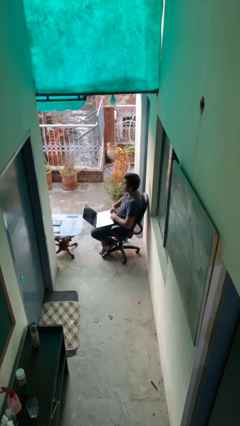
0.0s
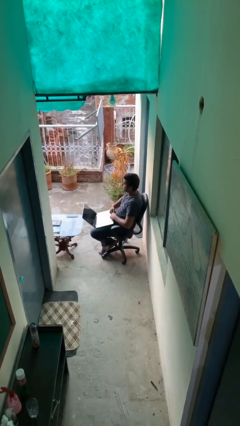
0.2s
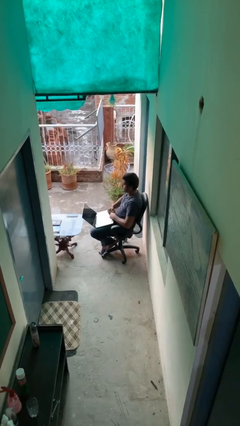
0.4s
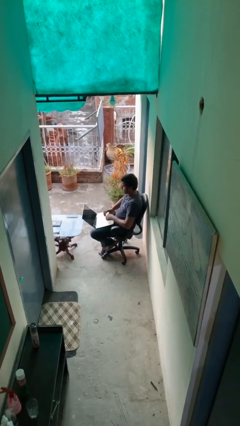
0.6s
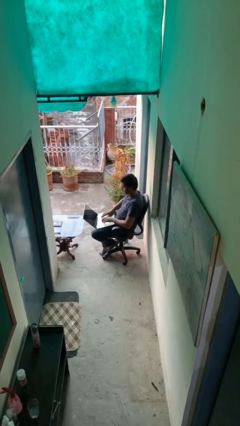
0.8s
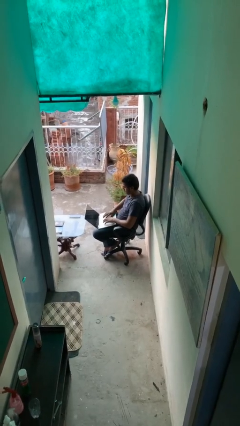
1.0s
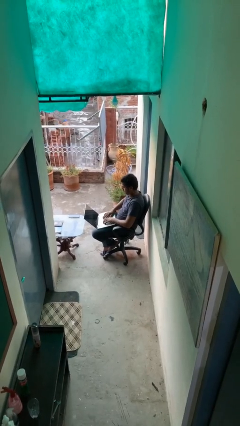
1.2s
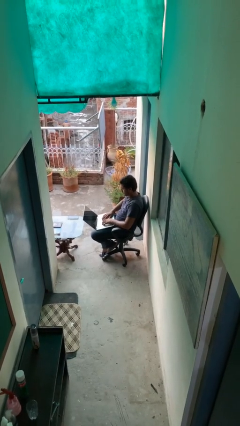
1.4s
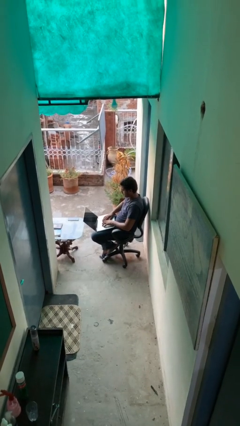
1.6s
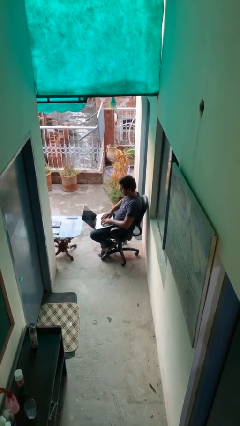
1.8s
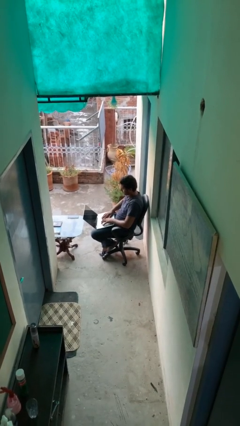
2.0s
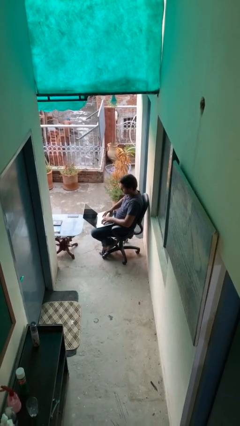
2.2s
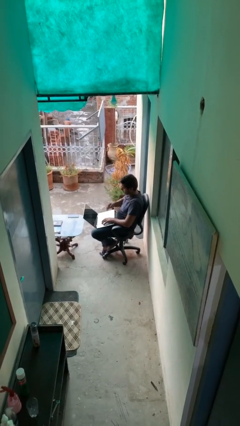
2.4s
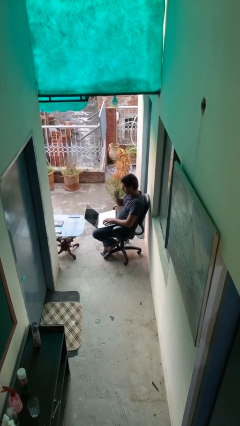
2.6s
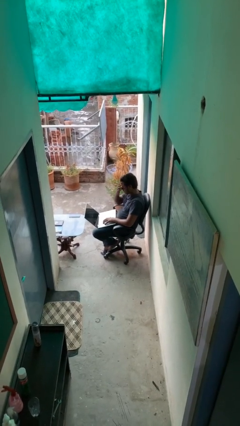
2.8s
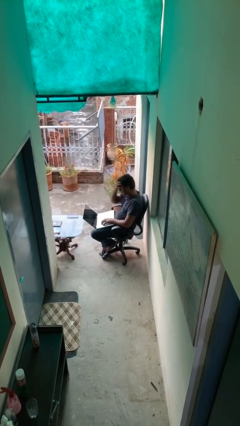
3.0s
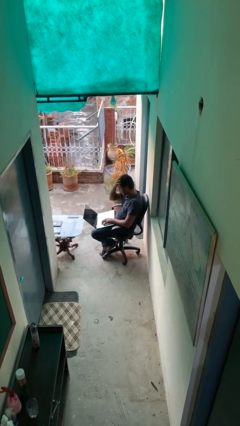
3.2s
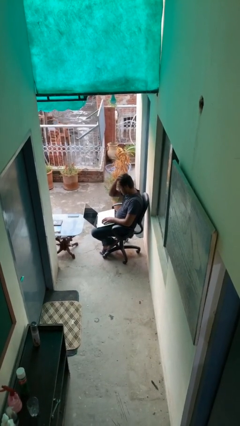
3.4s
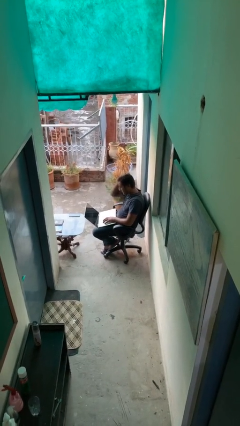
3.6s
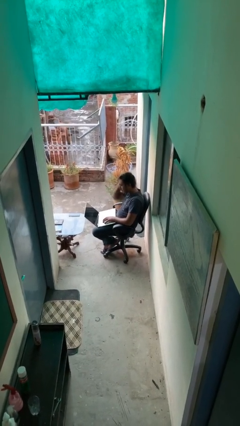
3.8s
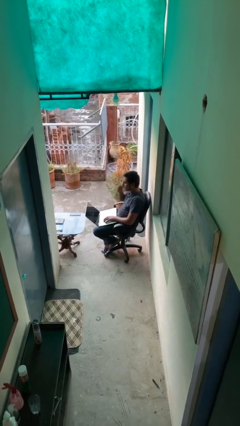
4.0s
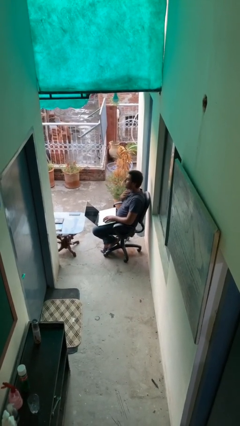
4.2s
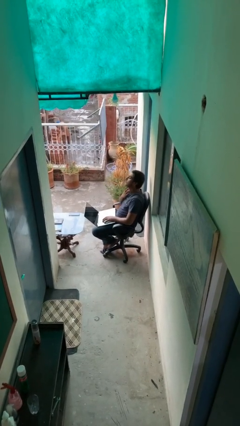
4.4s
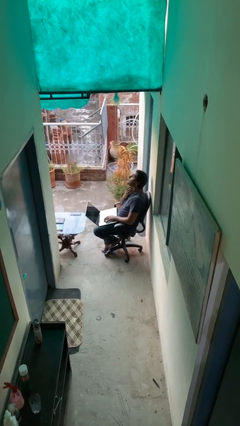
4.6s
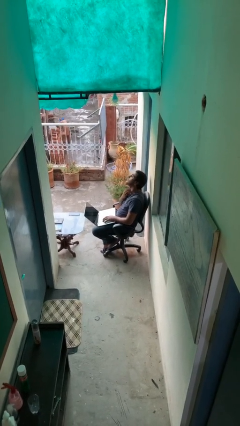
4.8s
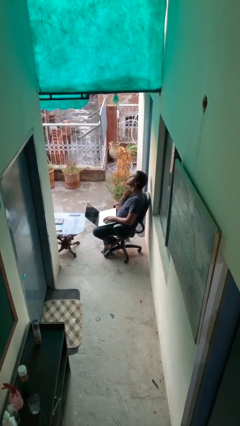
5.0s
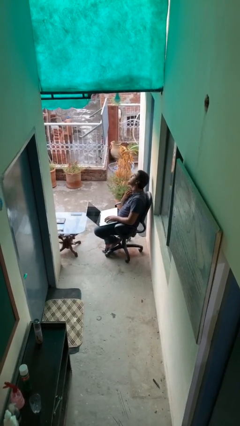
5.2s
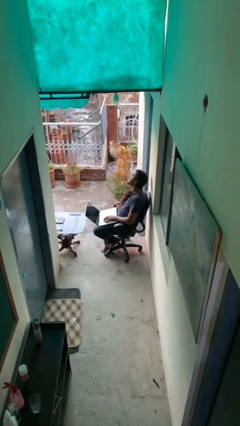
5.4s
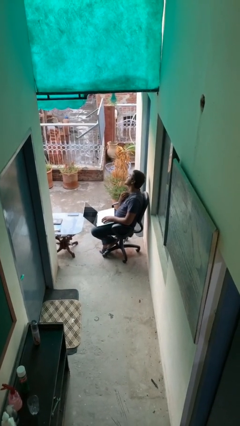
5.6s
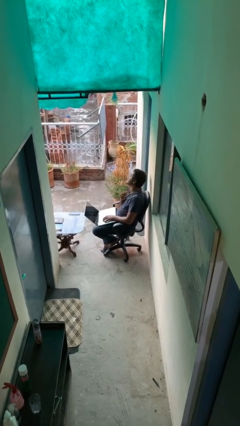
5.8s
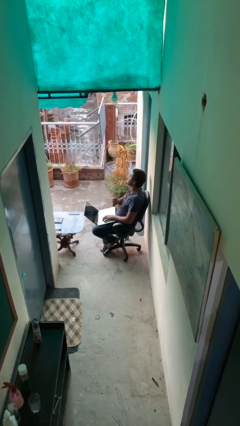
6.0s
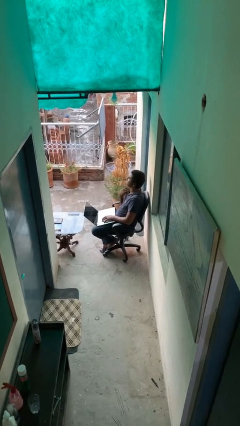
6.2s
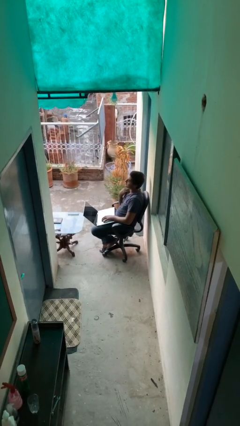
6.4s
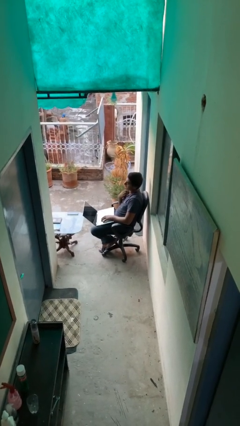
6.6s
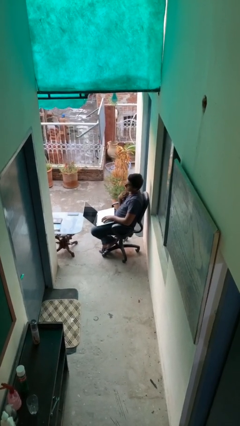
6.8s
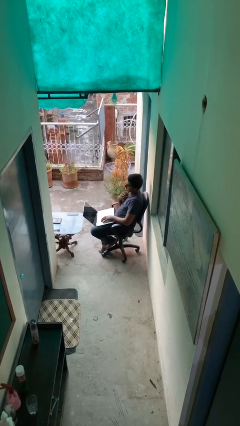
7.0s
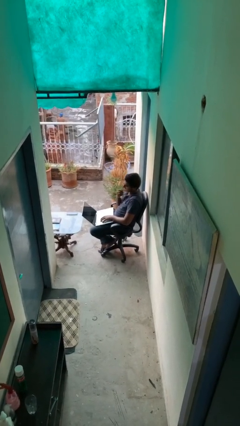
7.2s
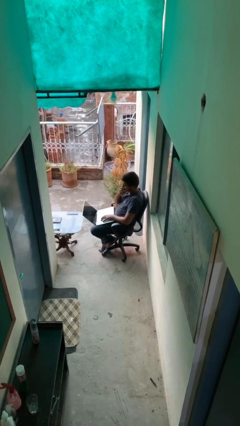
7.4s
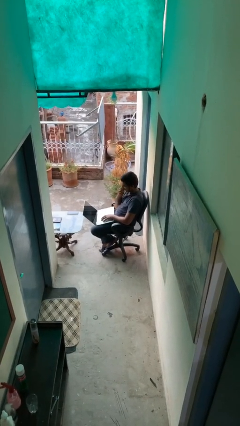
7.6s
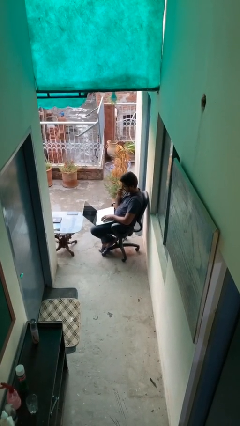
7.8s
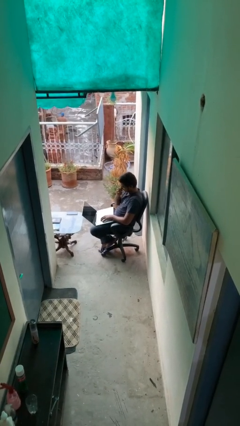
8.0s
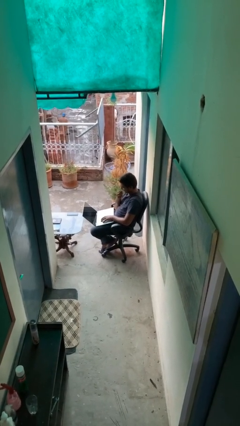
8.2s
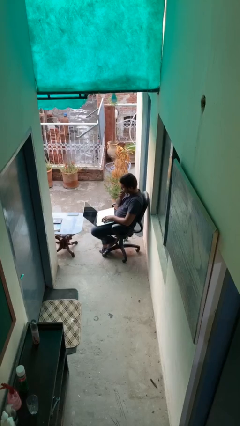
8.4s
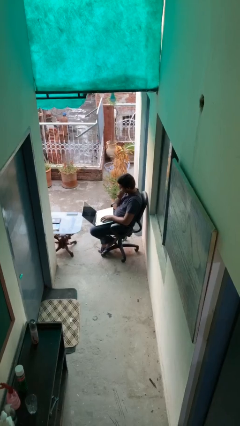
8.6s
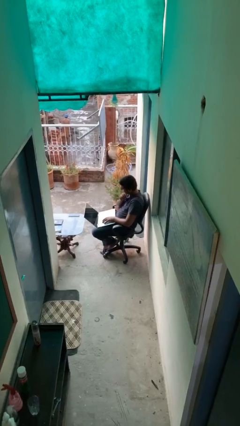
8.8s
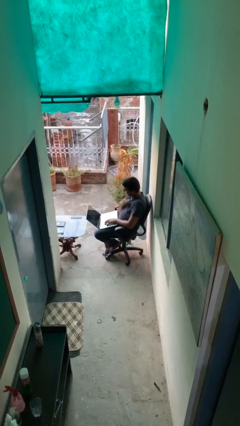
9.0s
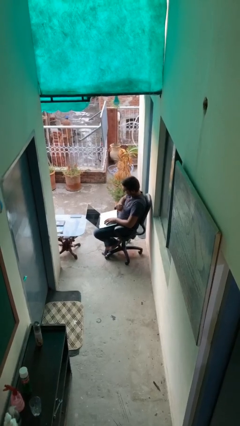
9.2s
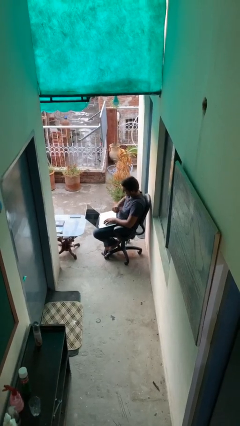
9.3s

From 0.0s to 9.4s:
person interacts with laptop

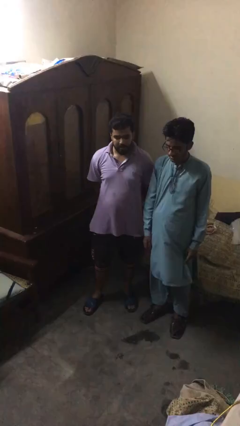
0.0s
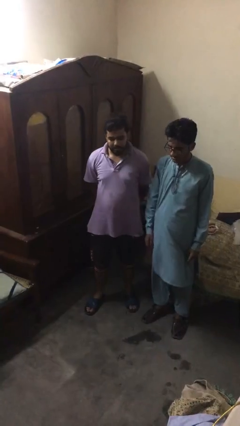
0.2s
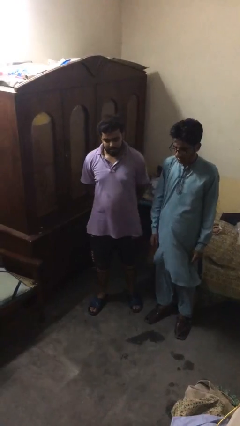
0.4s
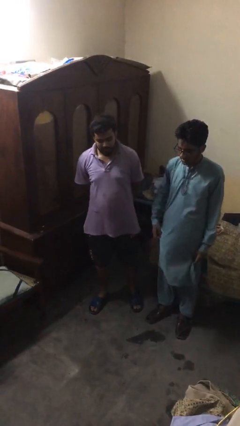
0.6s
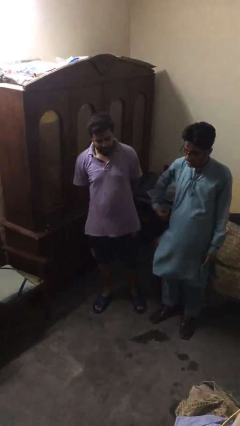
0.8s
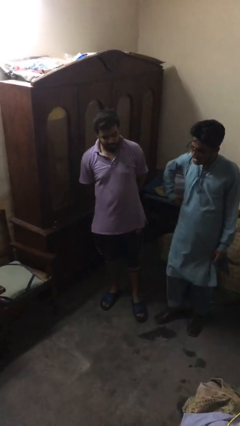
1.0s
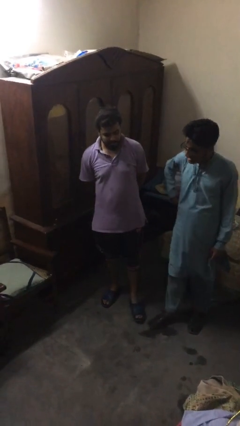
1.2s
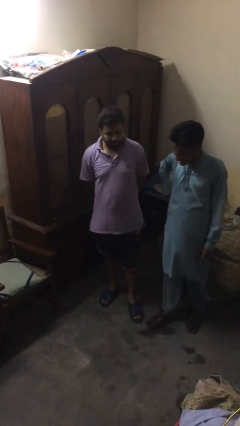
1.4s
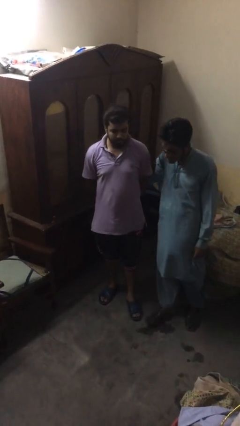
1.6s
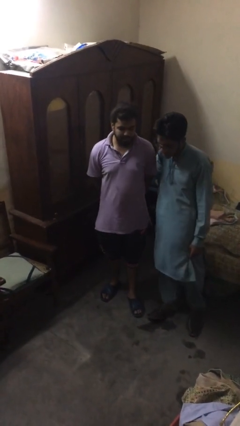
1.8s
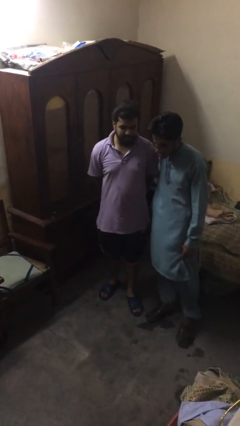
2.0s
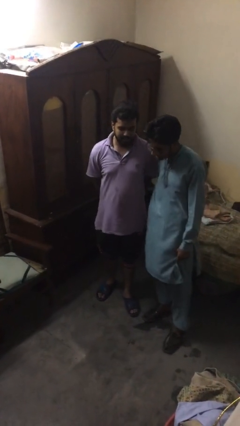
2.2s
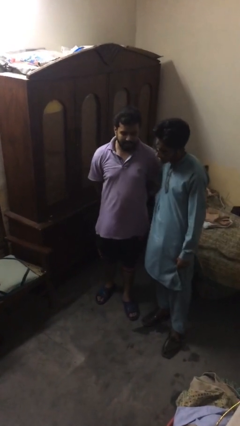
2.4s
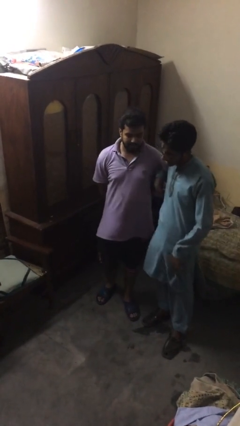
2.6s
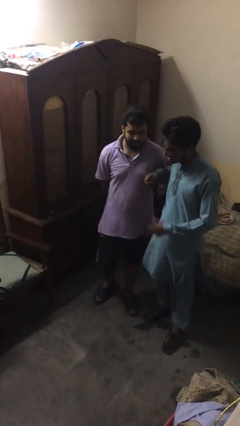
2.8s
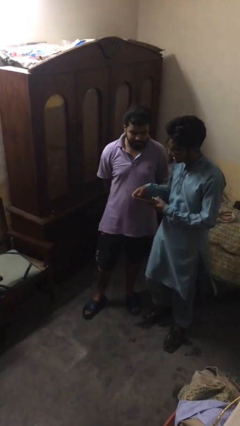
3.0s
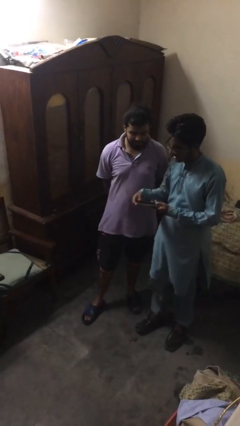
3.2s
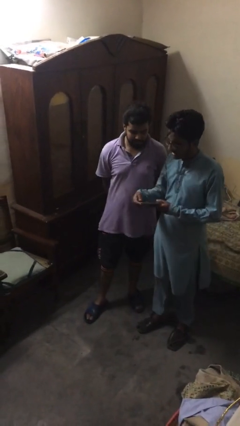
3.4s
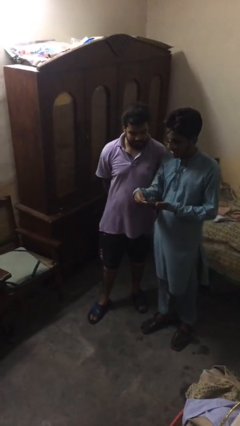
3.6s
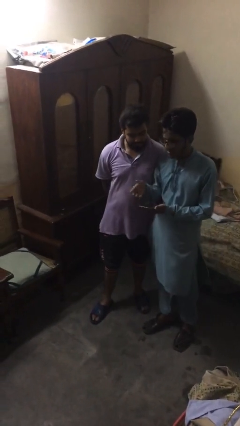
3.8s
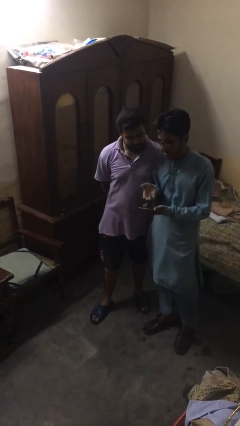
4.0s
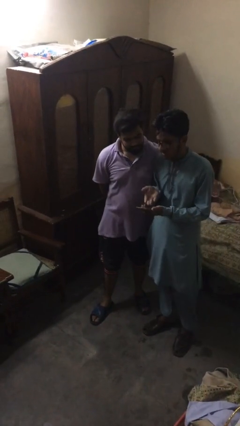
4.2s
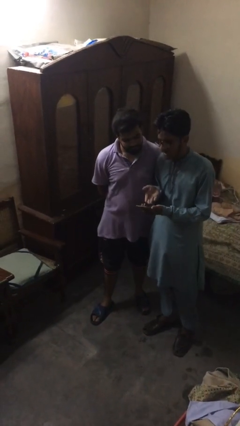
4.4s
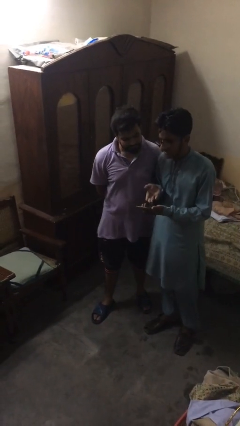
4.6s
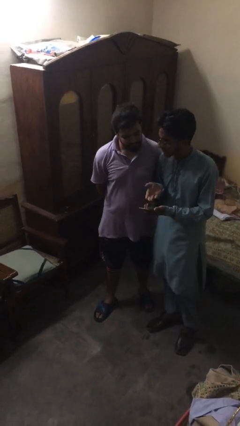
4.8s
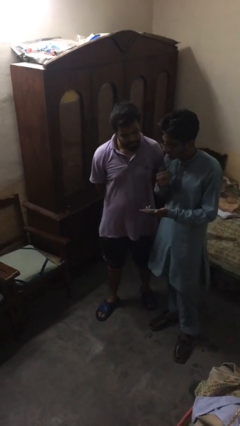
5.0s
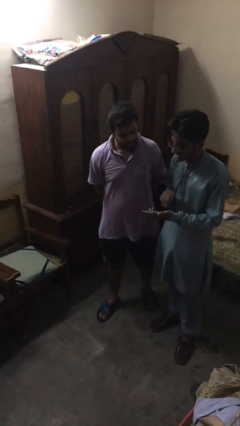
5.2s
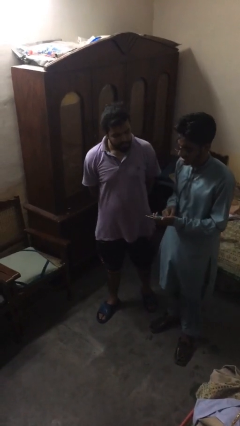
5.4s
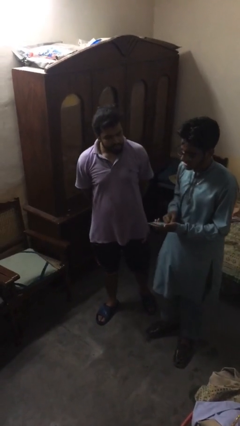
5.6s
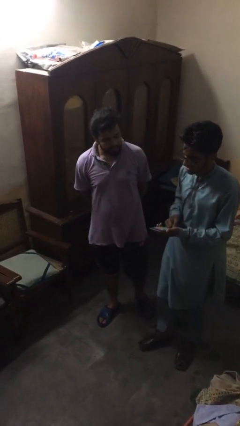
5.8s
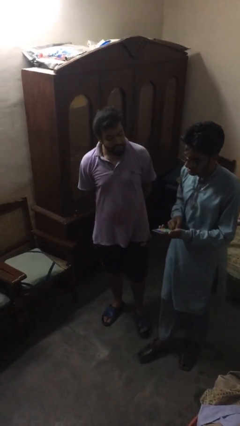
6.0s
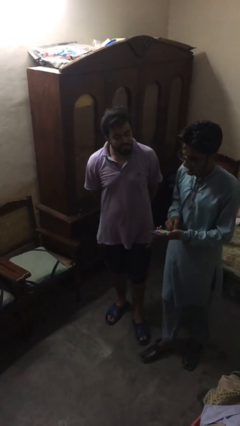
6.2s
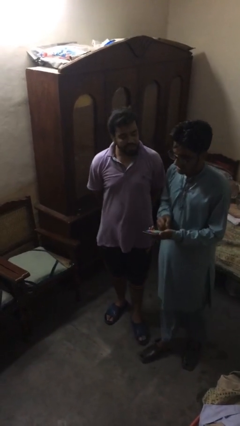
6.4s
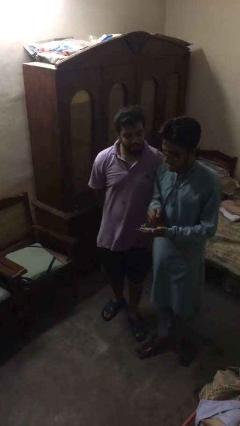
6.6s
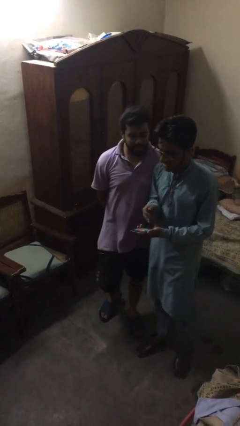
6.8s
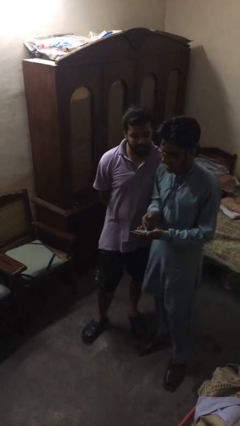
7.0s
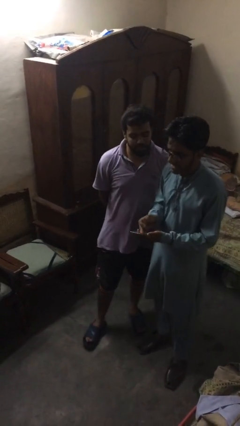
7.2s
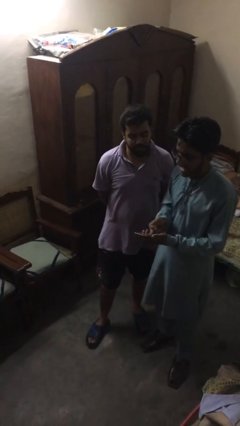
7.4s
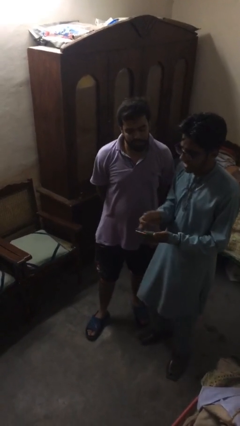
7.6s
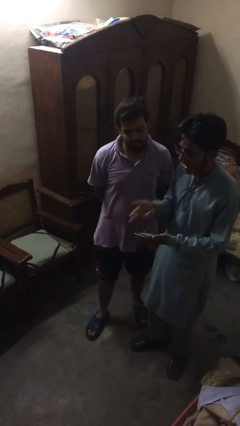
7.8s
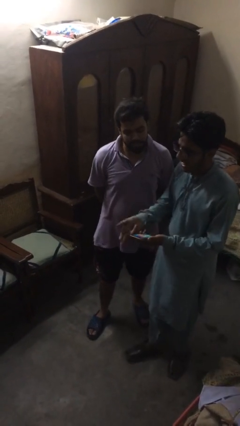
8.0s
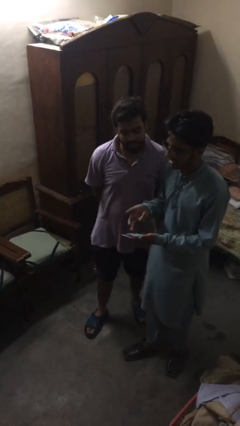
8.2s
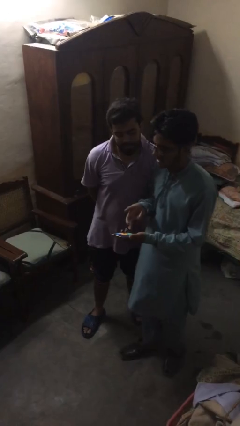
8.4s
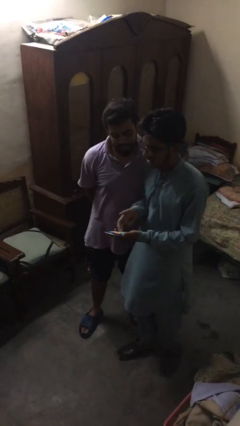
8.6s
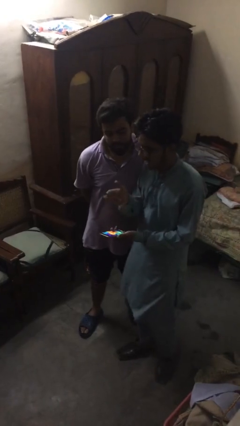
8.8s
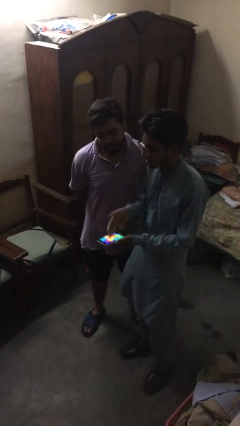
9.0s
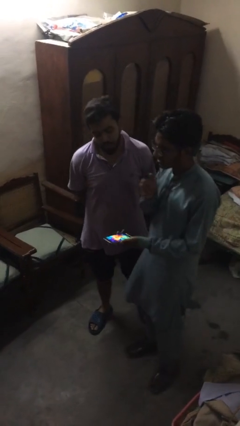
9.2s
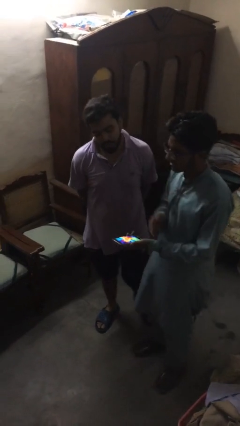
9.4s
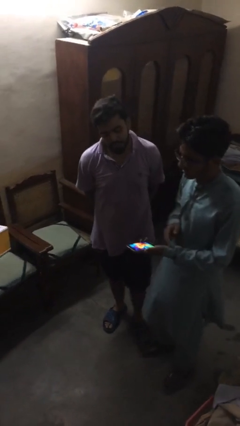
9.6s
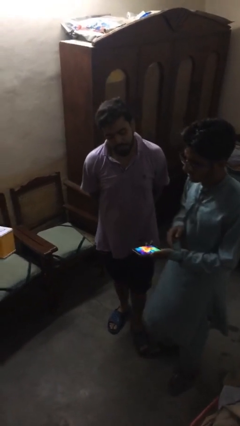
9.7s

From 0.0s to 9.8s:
person talks to person
